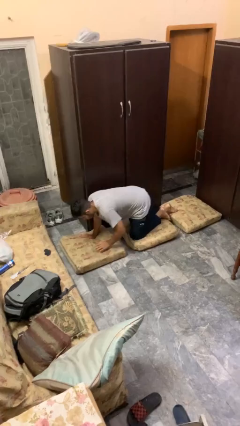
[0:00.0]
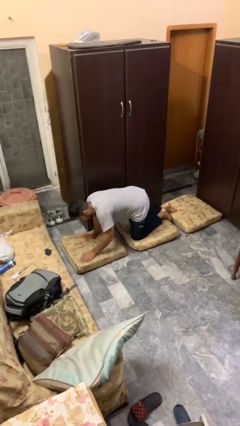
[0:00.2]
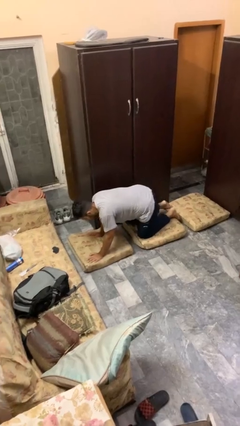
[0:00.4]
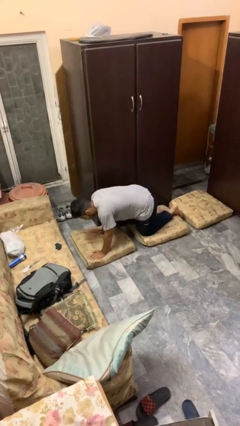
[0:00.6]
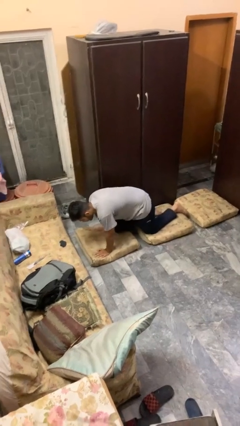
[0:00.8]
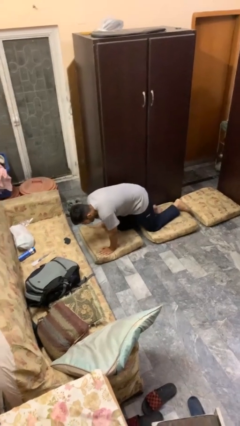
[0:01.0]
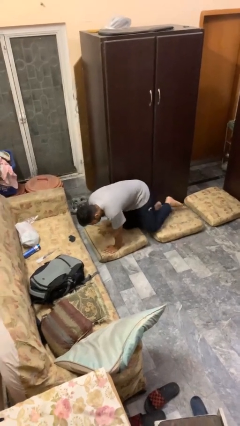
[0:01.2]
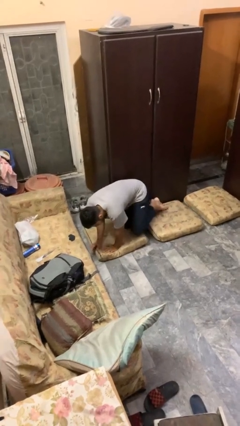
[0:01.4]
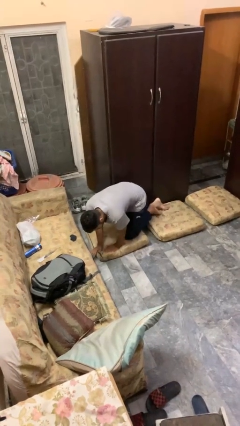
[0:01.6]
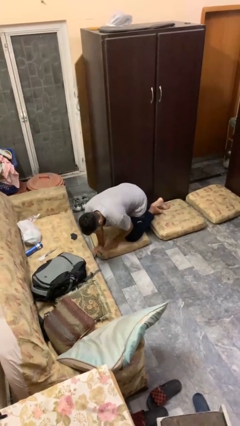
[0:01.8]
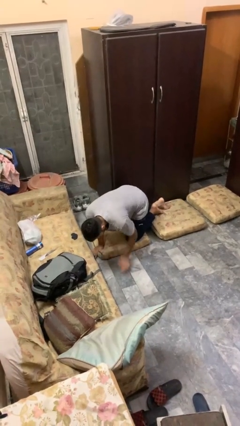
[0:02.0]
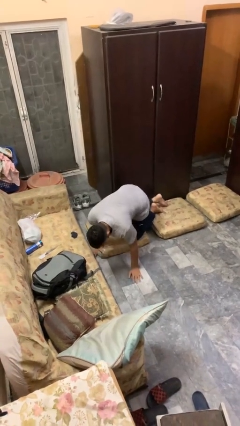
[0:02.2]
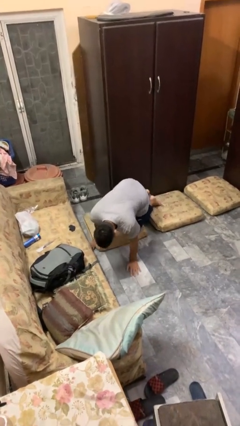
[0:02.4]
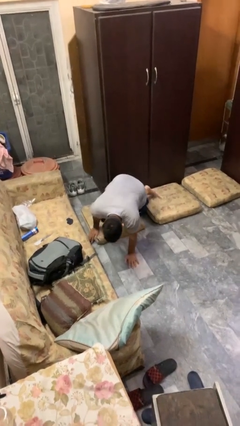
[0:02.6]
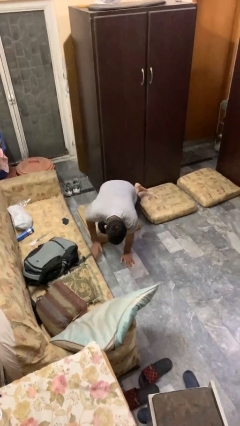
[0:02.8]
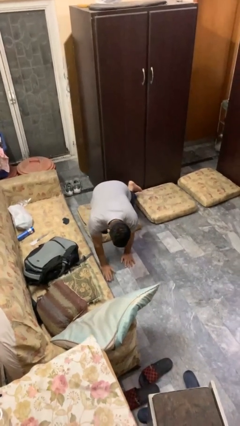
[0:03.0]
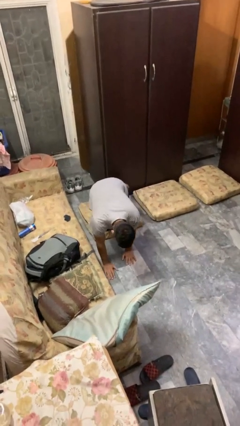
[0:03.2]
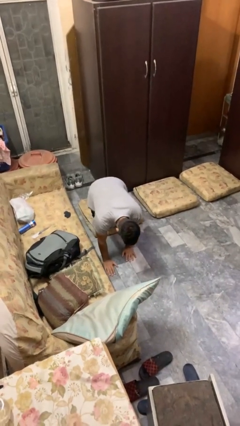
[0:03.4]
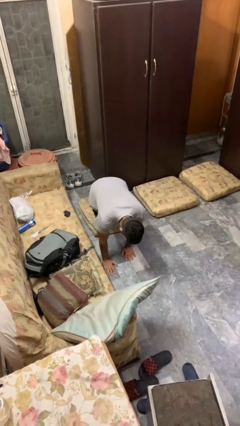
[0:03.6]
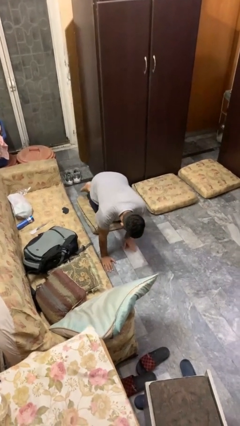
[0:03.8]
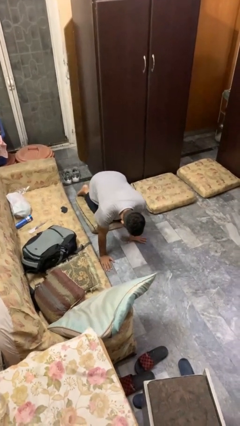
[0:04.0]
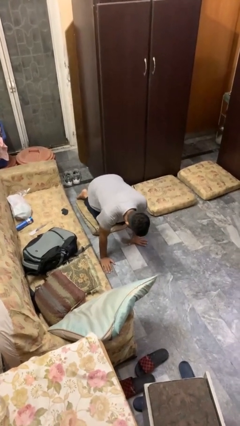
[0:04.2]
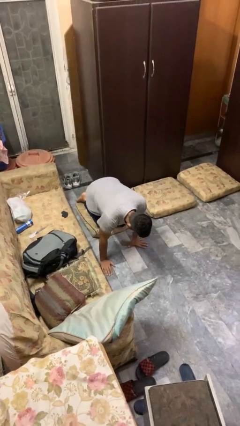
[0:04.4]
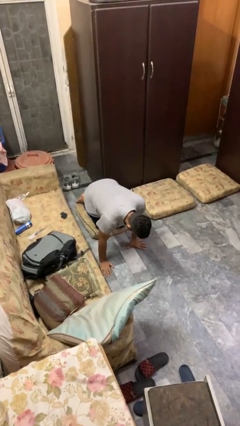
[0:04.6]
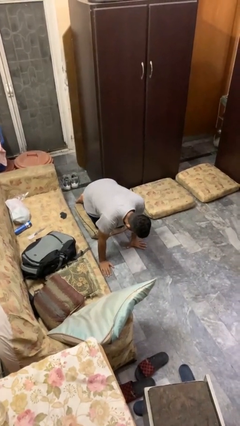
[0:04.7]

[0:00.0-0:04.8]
person crawls

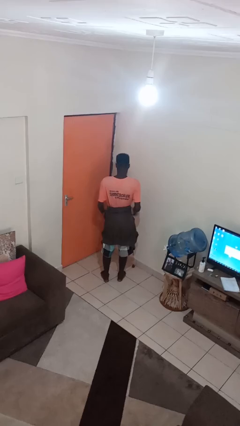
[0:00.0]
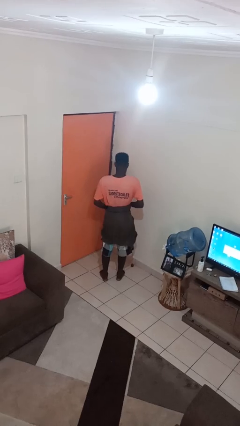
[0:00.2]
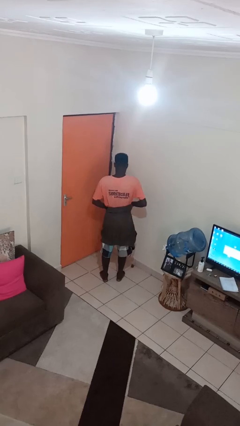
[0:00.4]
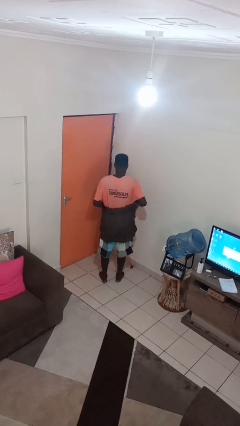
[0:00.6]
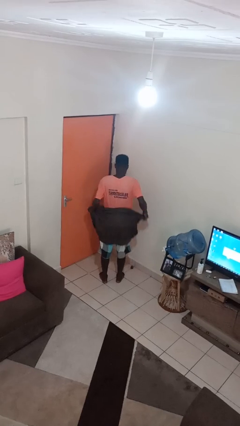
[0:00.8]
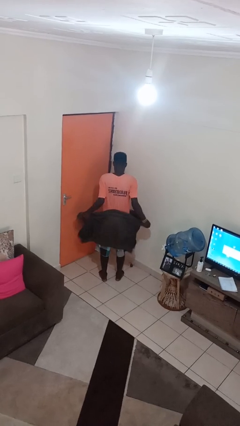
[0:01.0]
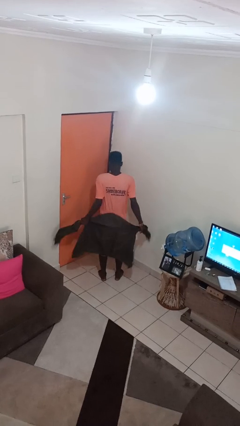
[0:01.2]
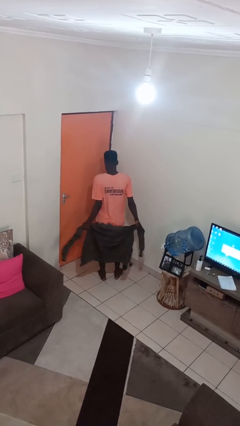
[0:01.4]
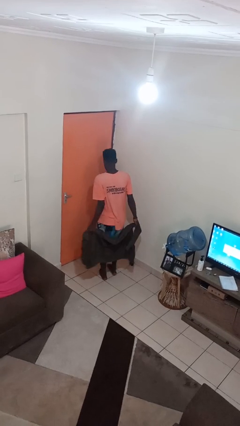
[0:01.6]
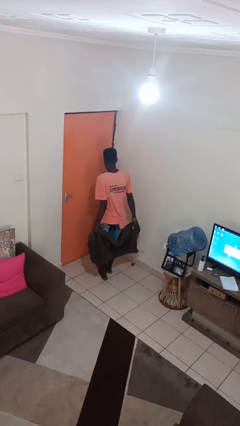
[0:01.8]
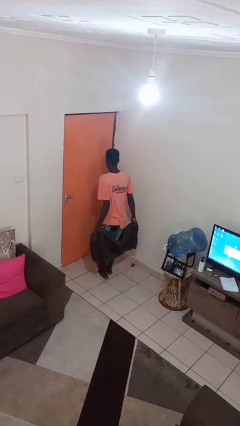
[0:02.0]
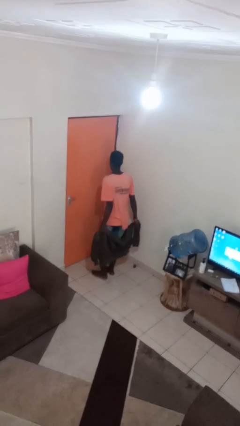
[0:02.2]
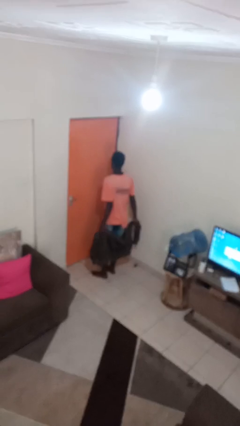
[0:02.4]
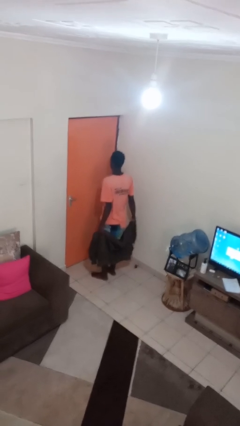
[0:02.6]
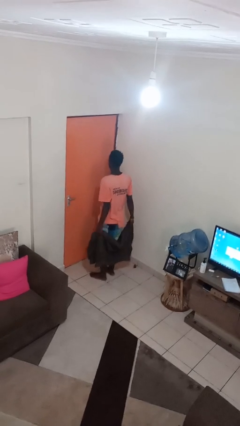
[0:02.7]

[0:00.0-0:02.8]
person unties jacket around waist

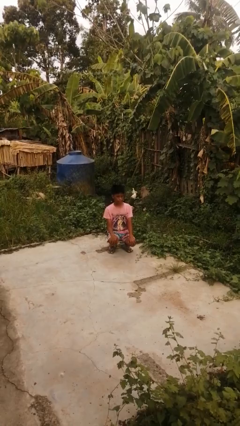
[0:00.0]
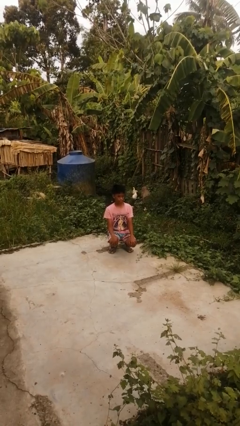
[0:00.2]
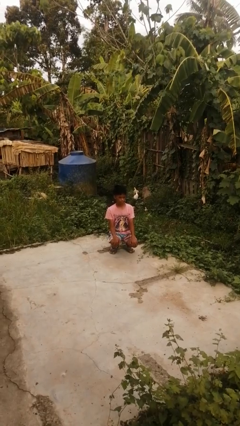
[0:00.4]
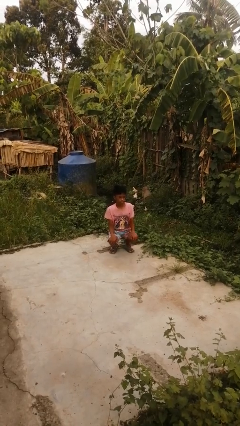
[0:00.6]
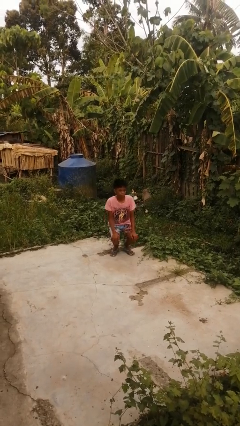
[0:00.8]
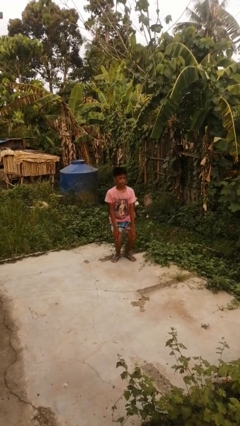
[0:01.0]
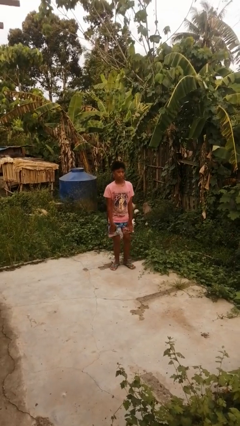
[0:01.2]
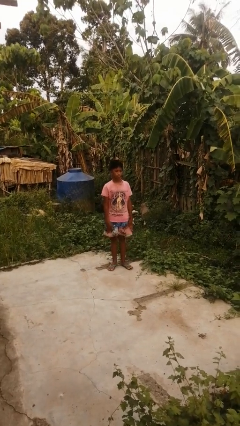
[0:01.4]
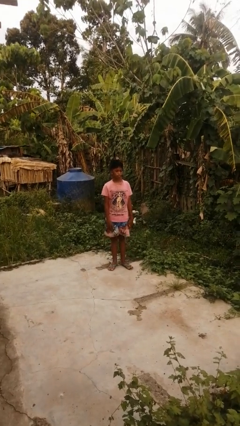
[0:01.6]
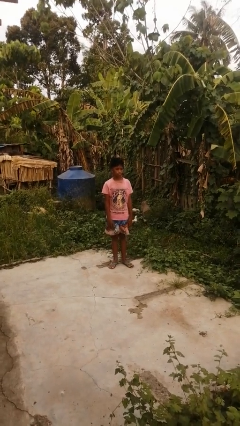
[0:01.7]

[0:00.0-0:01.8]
person stands up

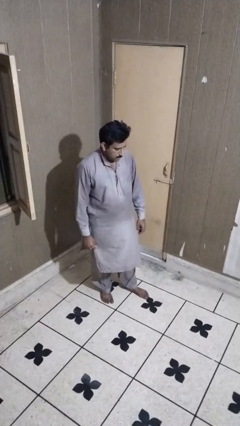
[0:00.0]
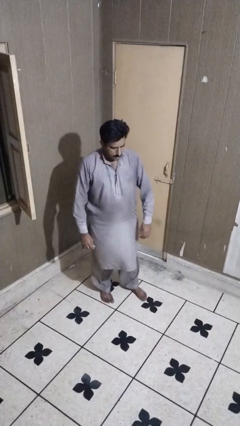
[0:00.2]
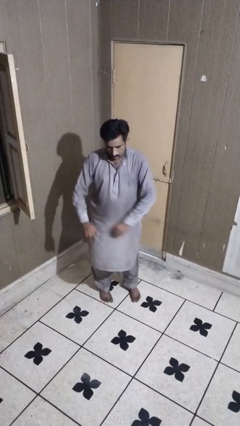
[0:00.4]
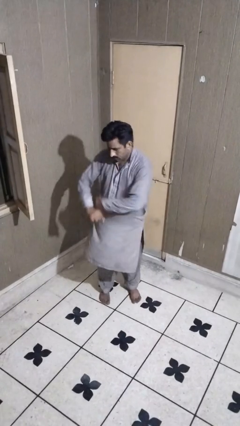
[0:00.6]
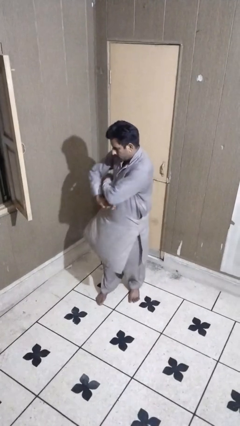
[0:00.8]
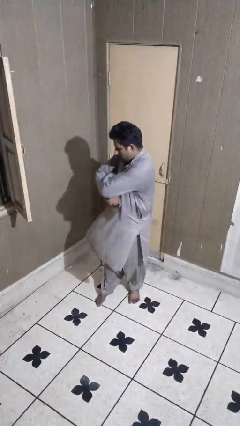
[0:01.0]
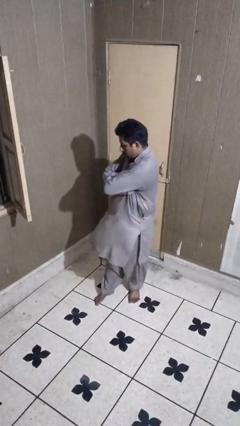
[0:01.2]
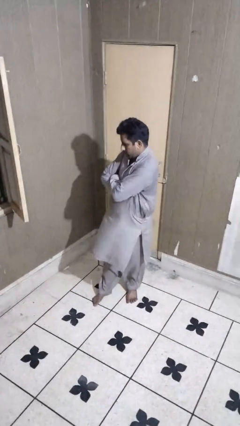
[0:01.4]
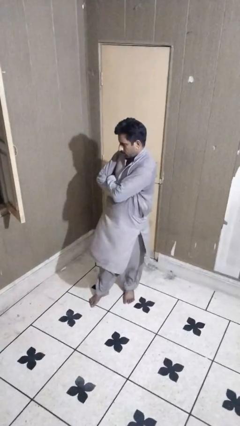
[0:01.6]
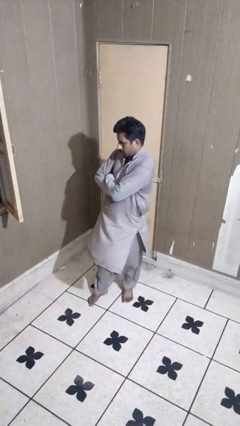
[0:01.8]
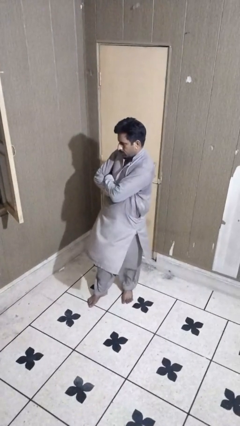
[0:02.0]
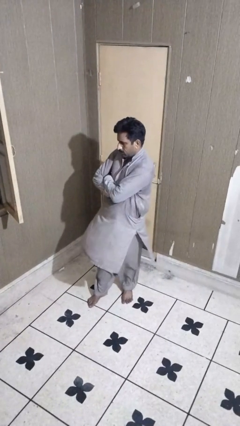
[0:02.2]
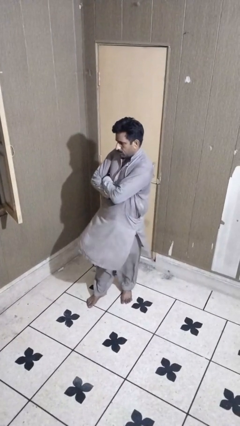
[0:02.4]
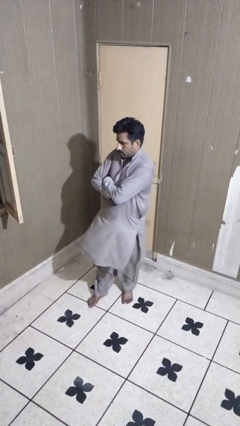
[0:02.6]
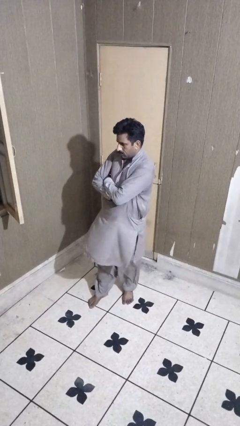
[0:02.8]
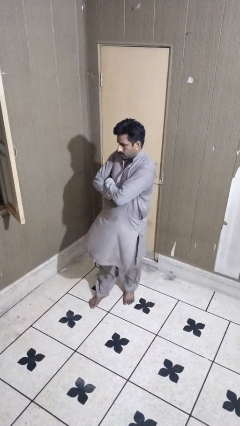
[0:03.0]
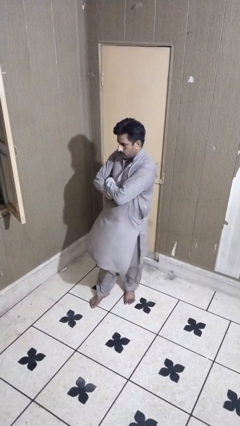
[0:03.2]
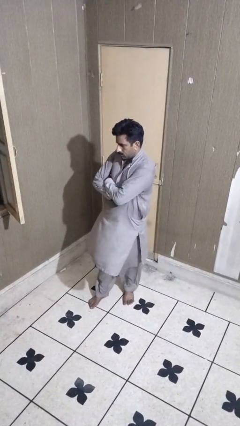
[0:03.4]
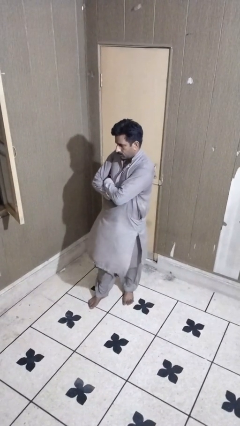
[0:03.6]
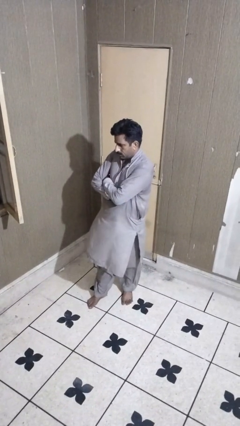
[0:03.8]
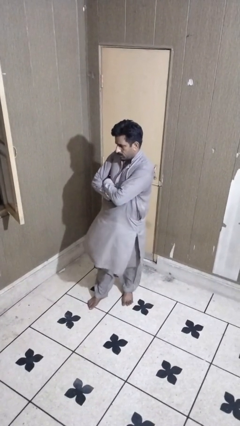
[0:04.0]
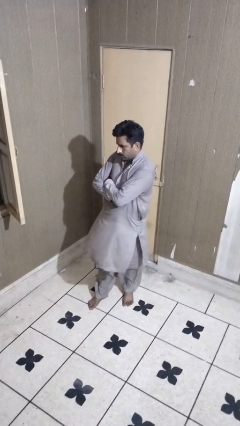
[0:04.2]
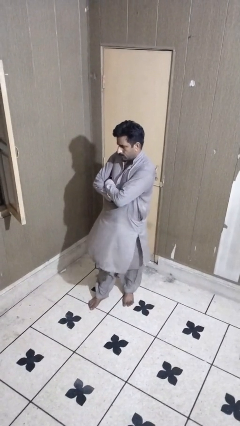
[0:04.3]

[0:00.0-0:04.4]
person crosses arms

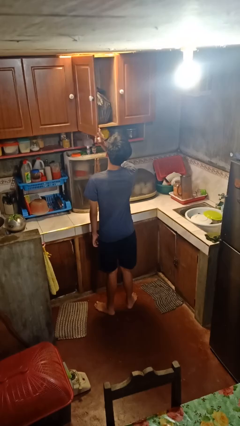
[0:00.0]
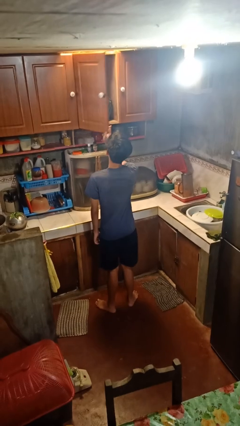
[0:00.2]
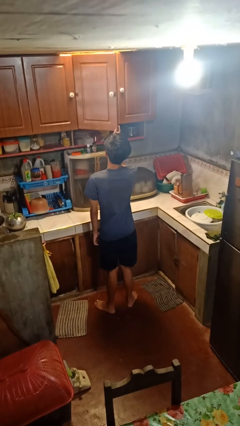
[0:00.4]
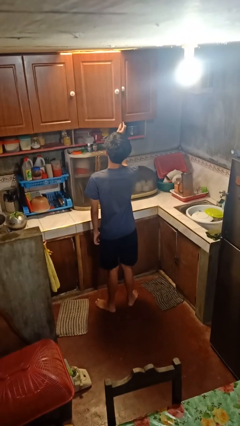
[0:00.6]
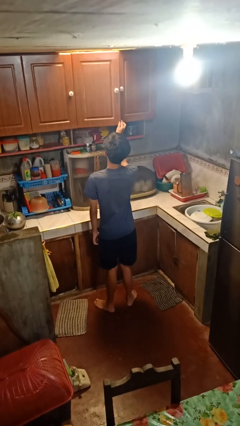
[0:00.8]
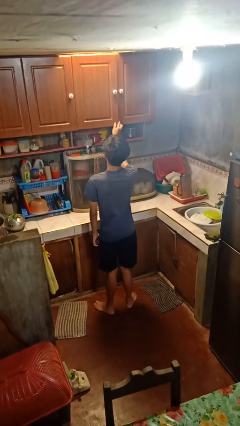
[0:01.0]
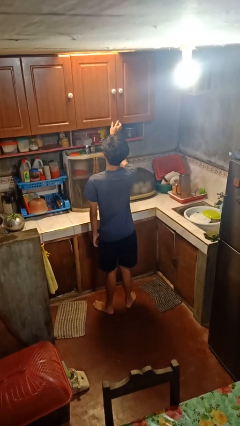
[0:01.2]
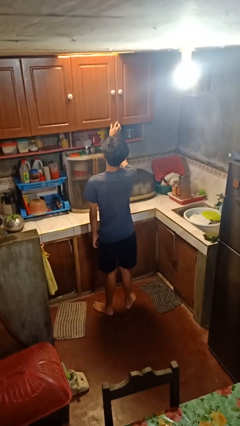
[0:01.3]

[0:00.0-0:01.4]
person closes cabinet

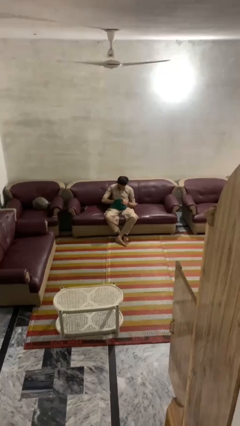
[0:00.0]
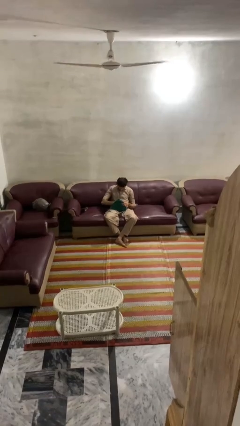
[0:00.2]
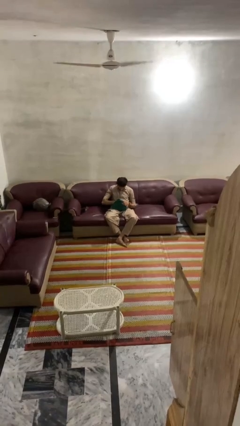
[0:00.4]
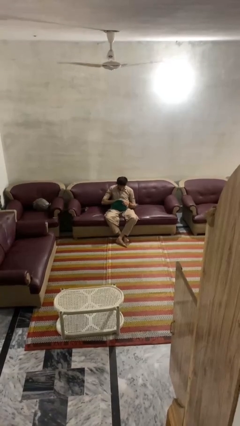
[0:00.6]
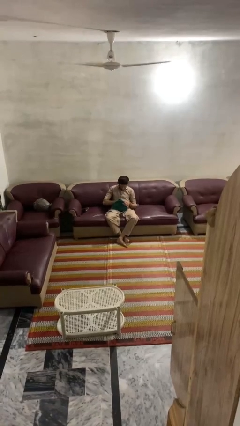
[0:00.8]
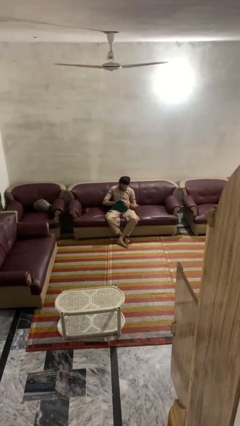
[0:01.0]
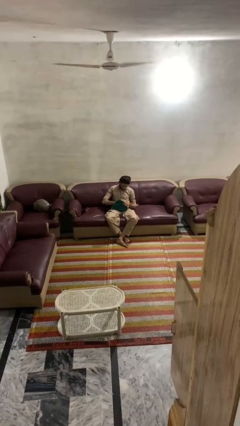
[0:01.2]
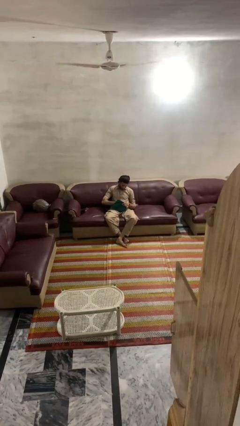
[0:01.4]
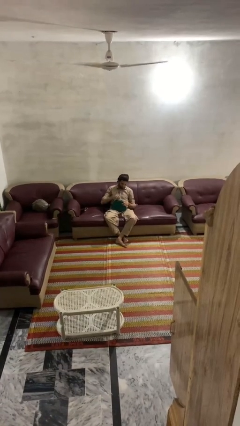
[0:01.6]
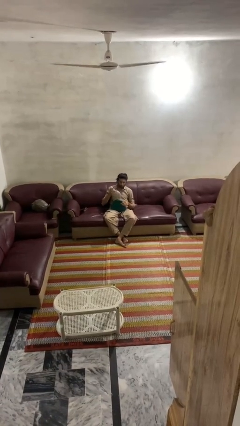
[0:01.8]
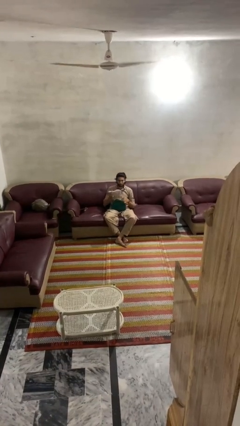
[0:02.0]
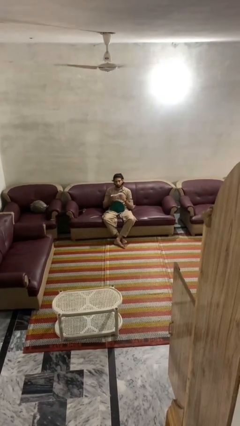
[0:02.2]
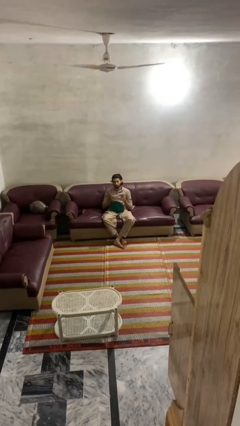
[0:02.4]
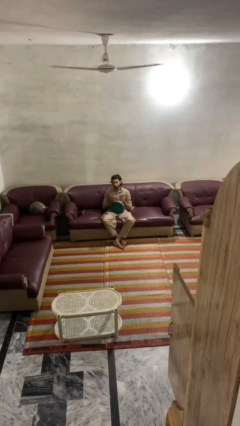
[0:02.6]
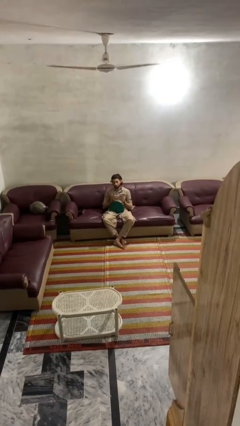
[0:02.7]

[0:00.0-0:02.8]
person takes object from purse
